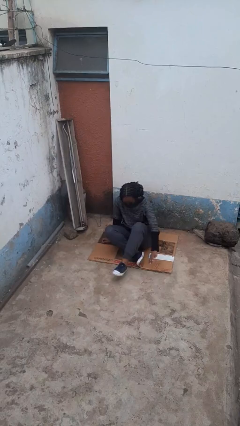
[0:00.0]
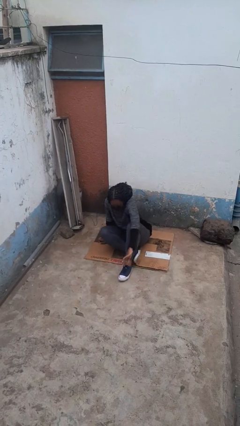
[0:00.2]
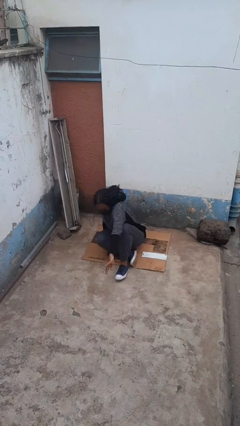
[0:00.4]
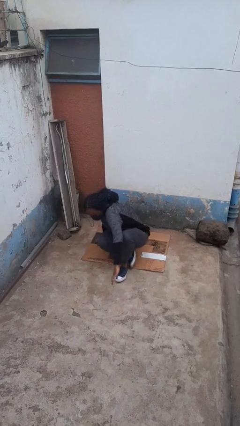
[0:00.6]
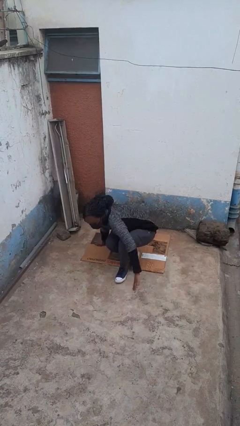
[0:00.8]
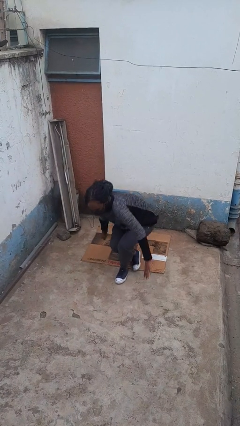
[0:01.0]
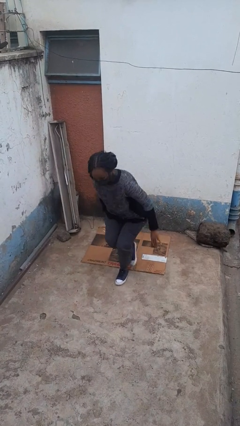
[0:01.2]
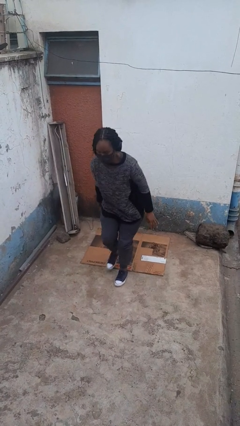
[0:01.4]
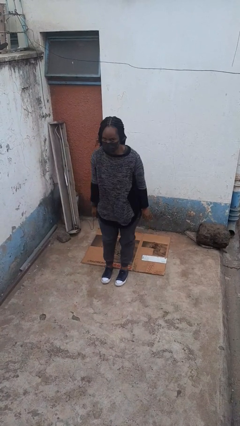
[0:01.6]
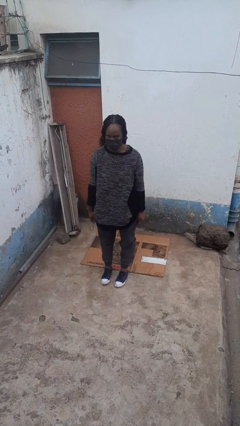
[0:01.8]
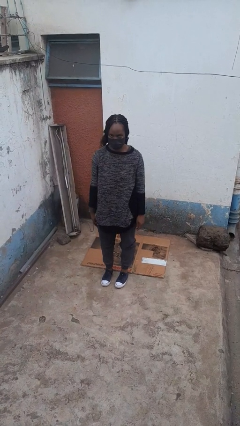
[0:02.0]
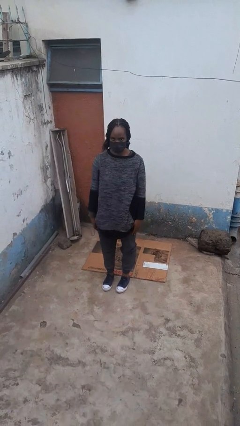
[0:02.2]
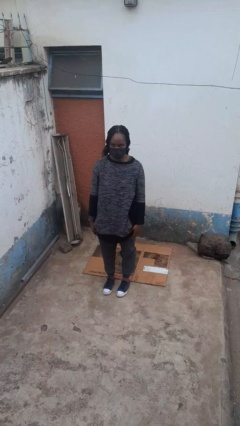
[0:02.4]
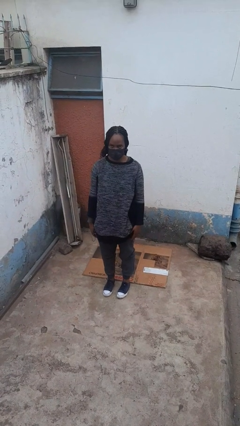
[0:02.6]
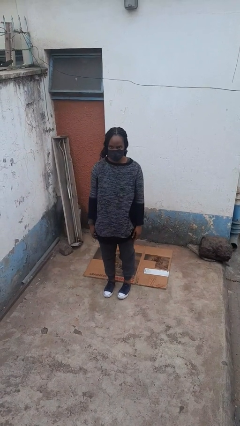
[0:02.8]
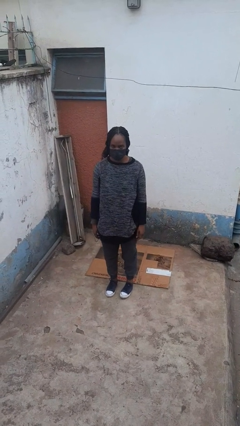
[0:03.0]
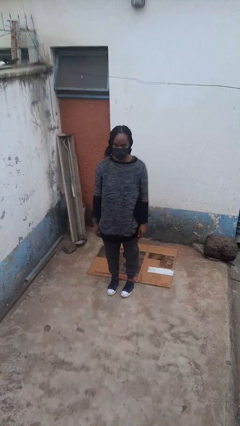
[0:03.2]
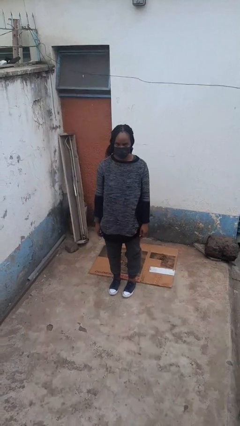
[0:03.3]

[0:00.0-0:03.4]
person stands up from floor

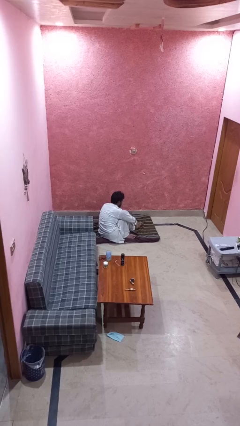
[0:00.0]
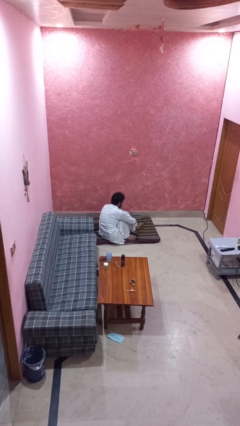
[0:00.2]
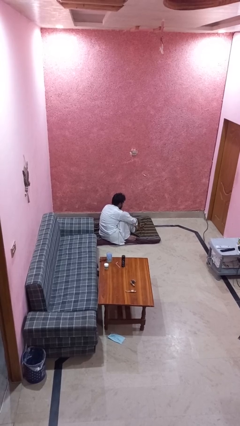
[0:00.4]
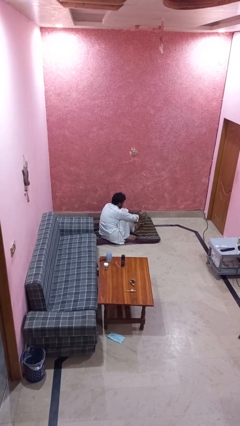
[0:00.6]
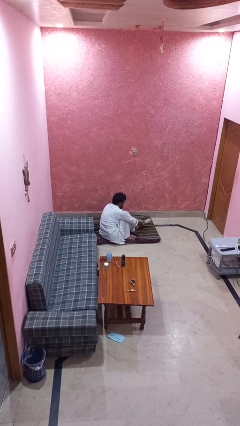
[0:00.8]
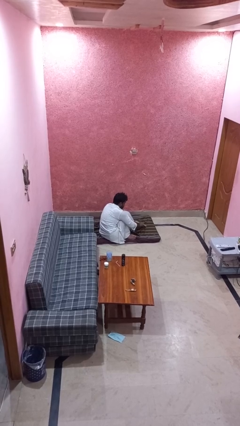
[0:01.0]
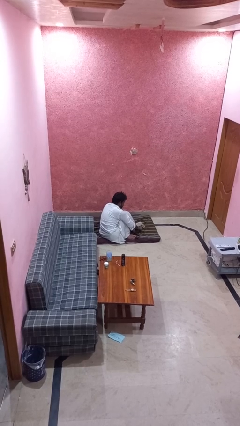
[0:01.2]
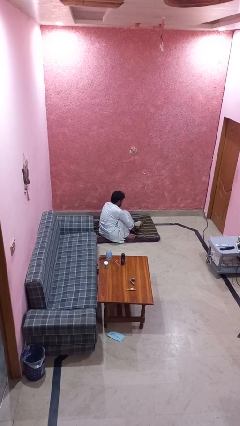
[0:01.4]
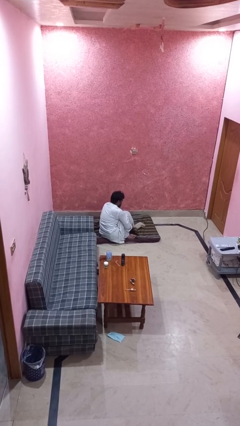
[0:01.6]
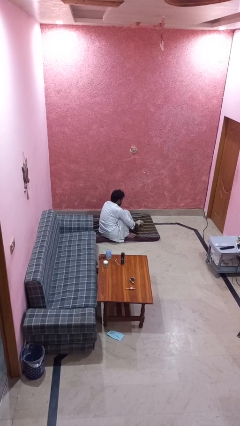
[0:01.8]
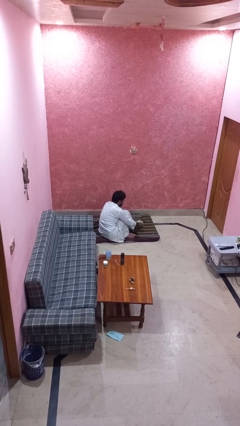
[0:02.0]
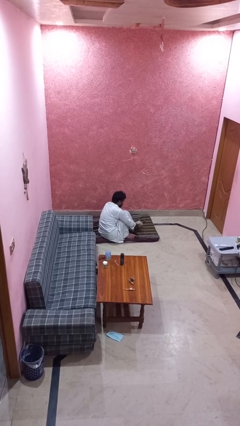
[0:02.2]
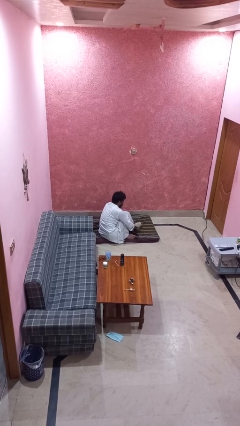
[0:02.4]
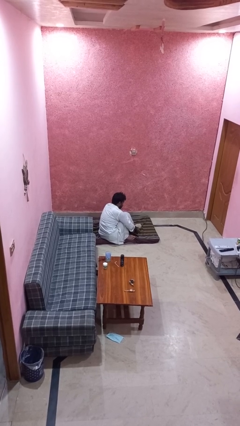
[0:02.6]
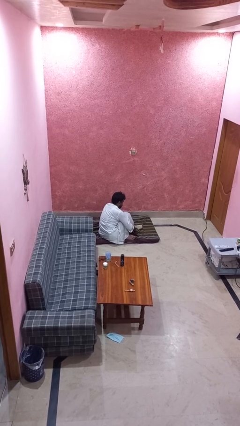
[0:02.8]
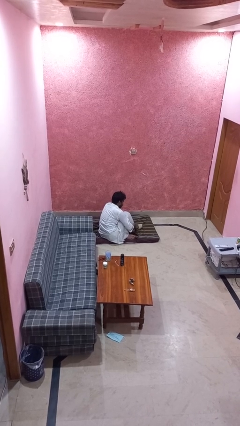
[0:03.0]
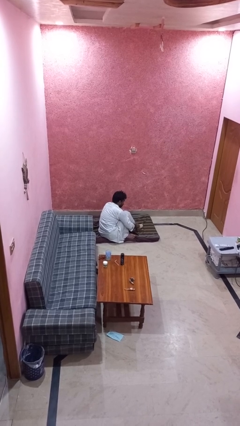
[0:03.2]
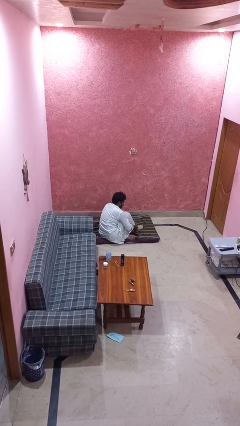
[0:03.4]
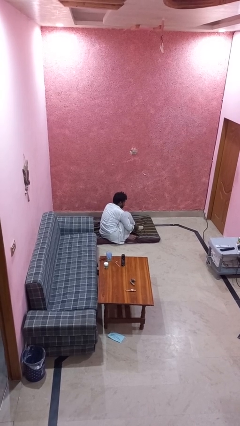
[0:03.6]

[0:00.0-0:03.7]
person puts on socks

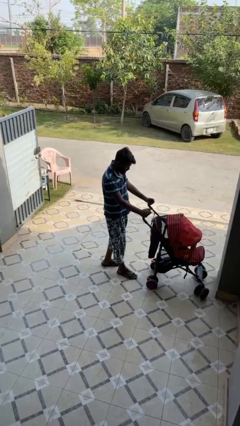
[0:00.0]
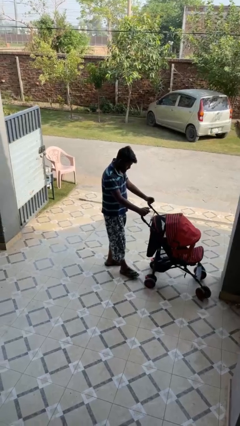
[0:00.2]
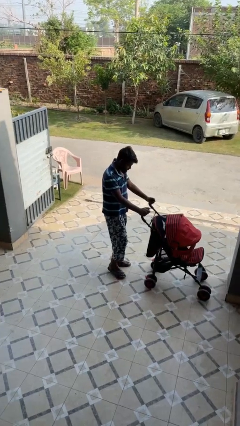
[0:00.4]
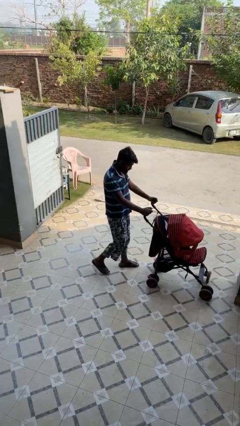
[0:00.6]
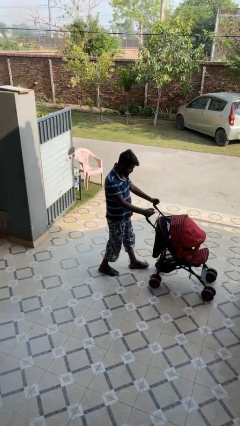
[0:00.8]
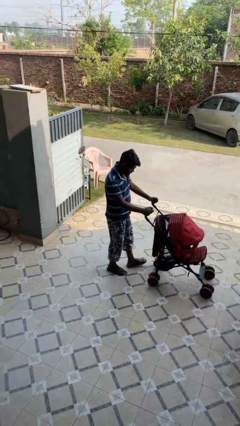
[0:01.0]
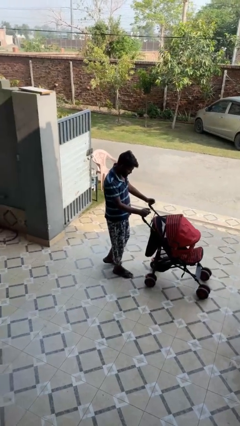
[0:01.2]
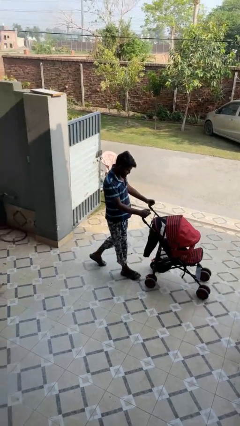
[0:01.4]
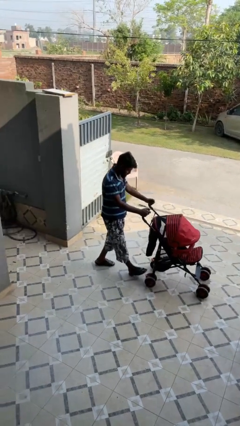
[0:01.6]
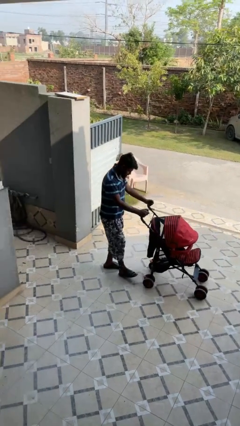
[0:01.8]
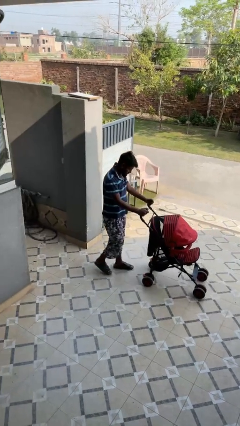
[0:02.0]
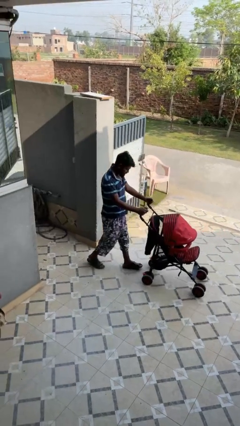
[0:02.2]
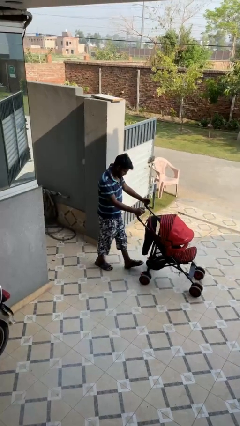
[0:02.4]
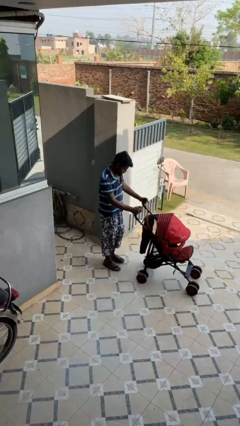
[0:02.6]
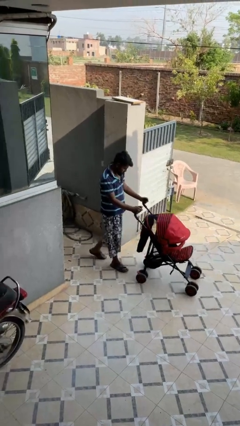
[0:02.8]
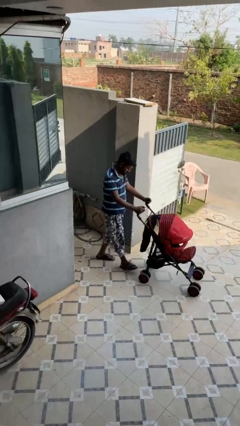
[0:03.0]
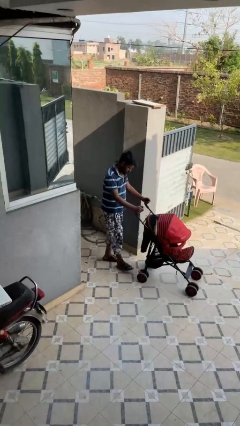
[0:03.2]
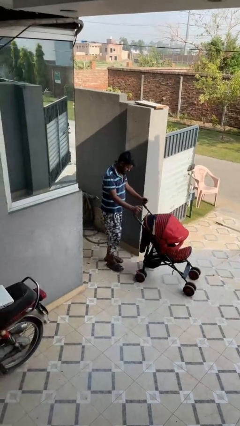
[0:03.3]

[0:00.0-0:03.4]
person pulls wheeled cart

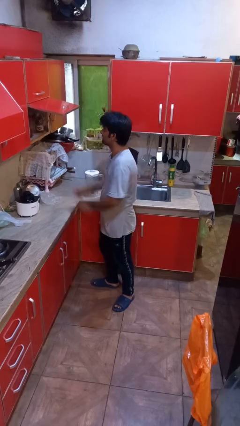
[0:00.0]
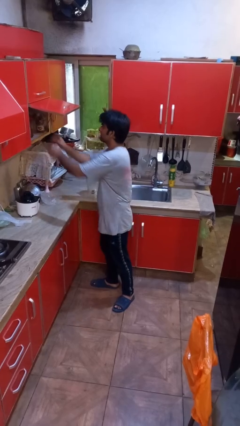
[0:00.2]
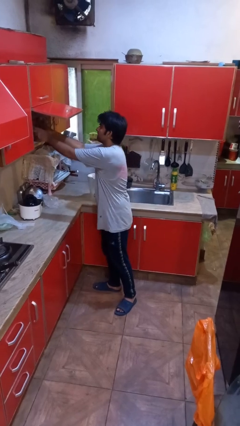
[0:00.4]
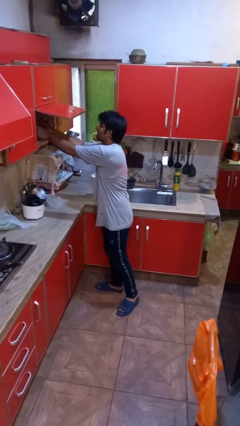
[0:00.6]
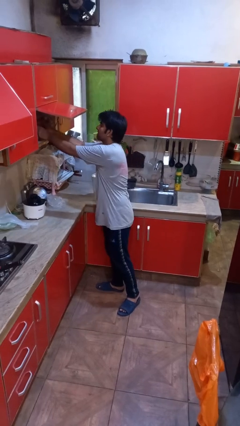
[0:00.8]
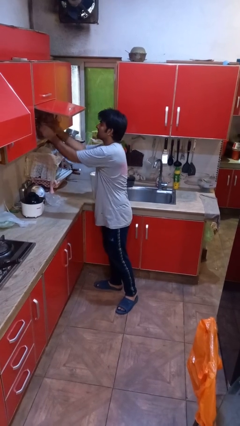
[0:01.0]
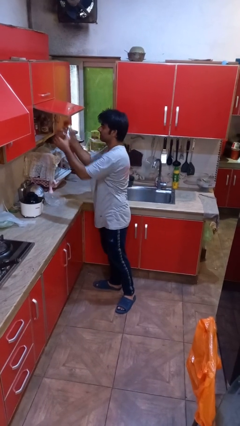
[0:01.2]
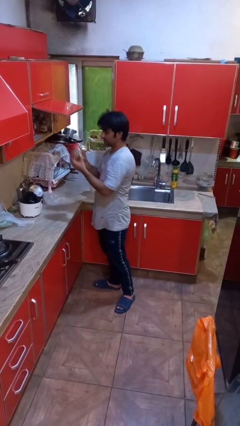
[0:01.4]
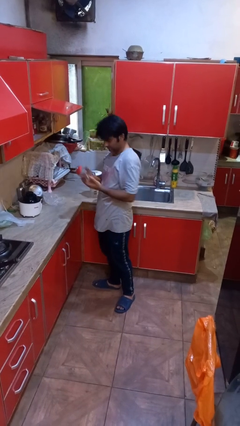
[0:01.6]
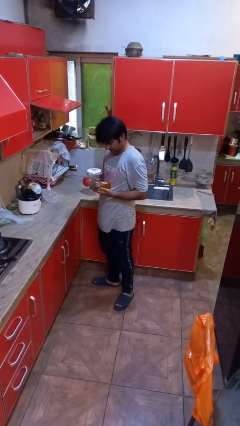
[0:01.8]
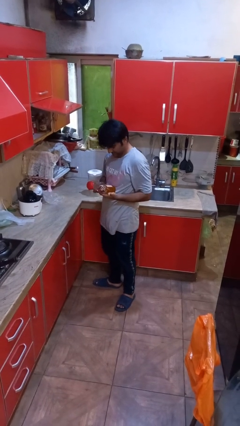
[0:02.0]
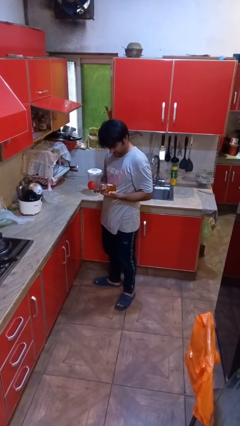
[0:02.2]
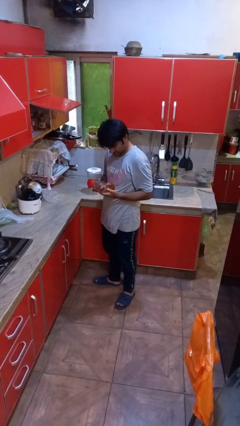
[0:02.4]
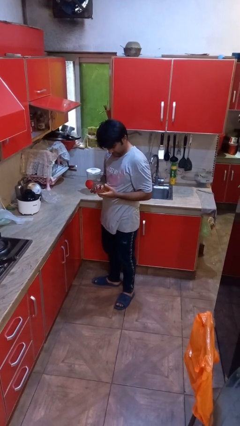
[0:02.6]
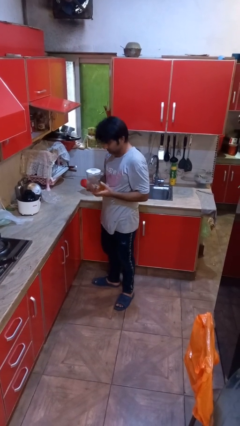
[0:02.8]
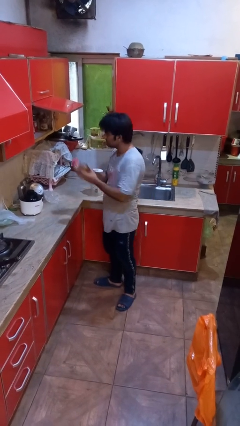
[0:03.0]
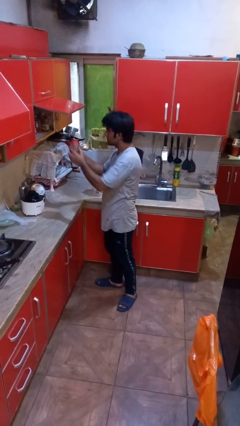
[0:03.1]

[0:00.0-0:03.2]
person picks up object from cabinet

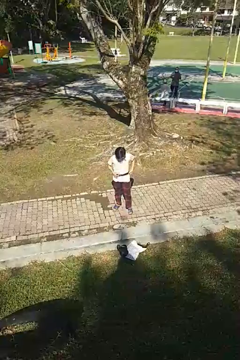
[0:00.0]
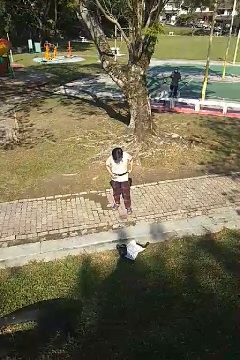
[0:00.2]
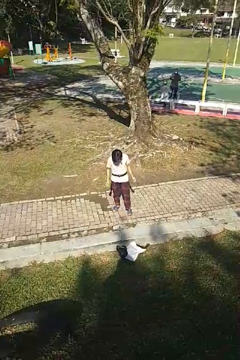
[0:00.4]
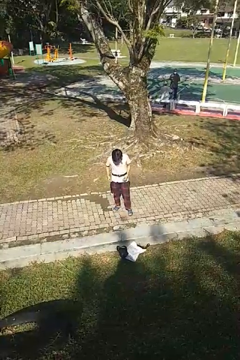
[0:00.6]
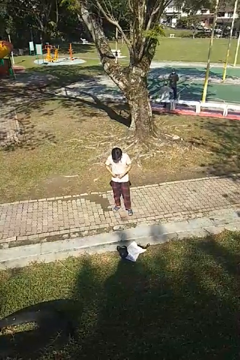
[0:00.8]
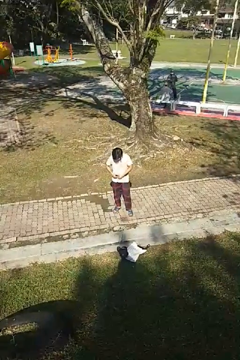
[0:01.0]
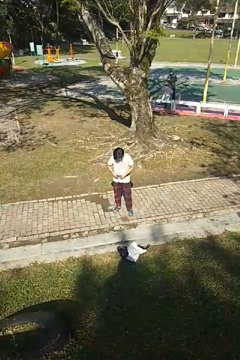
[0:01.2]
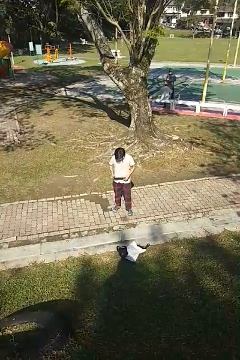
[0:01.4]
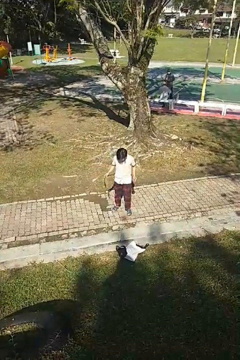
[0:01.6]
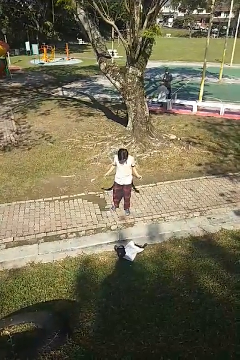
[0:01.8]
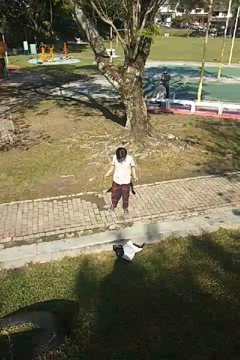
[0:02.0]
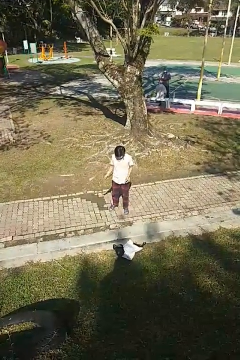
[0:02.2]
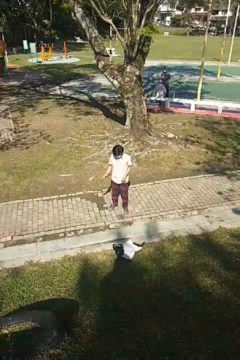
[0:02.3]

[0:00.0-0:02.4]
person takes off belt

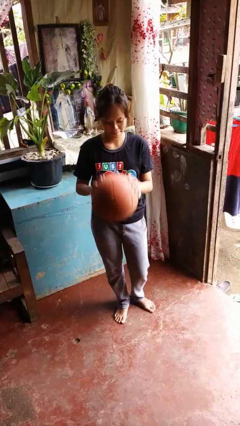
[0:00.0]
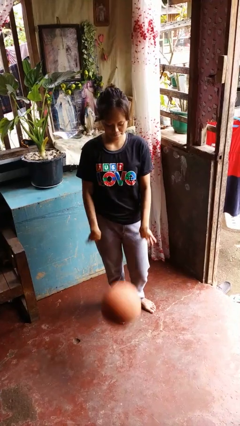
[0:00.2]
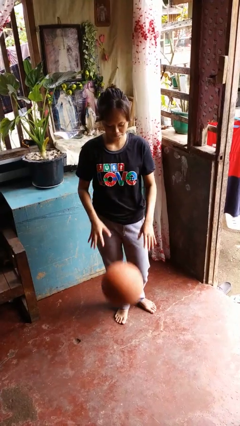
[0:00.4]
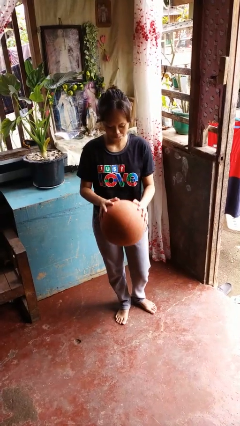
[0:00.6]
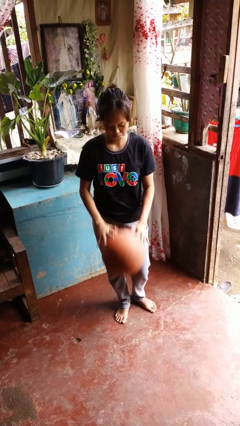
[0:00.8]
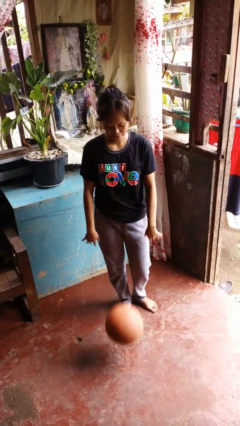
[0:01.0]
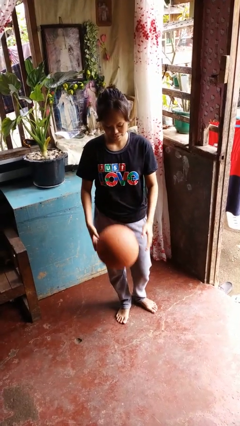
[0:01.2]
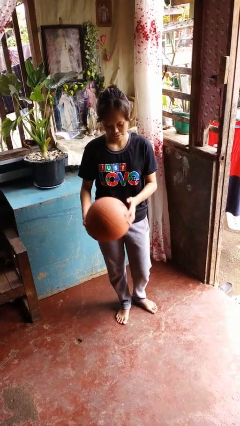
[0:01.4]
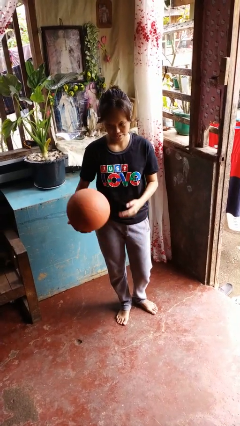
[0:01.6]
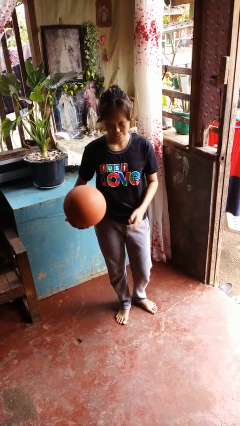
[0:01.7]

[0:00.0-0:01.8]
person bounces ball on floor
